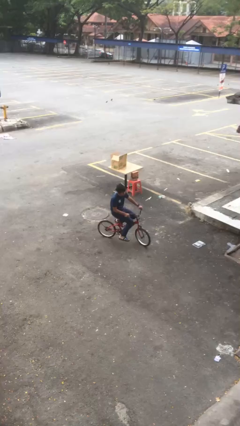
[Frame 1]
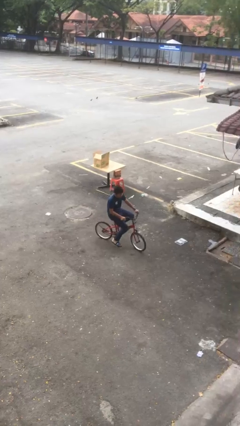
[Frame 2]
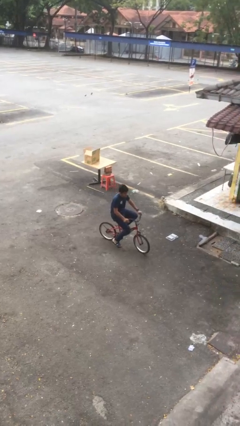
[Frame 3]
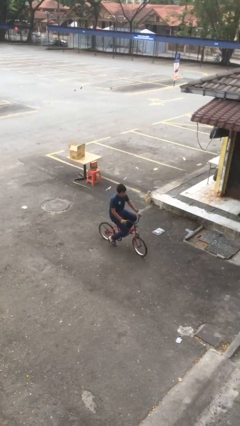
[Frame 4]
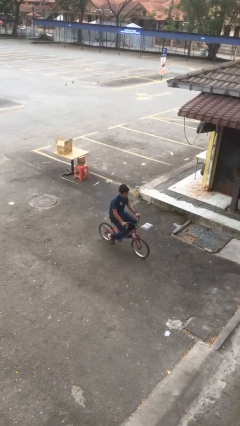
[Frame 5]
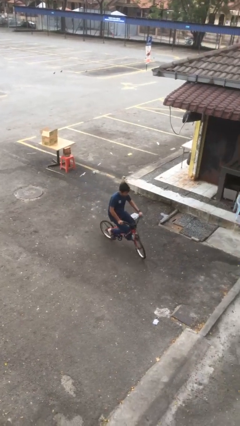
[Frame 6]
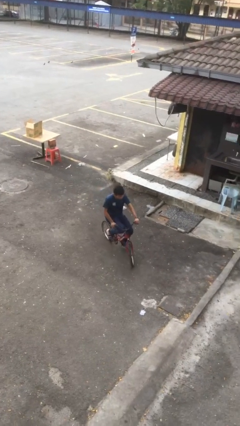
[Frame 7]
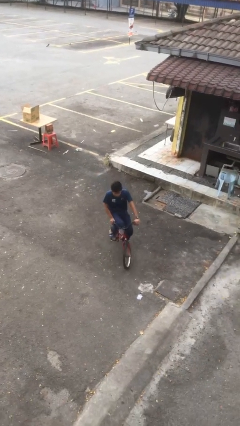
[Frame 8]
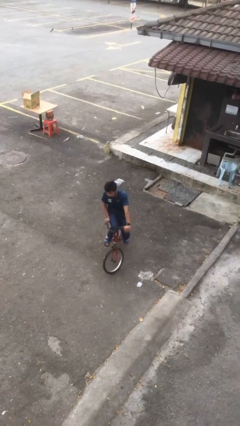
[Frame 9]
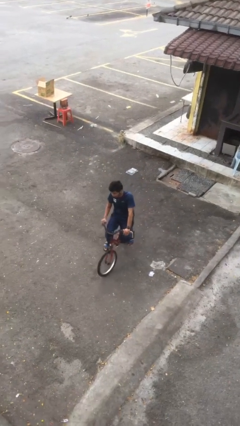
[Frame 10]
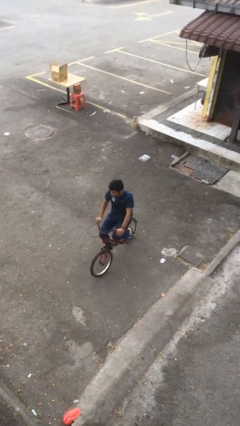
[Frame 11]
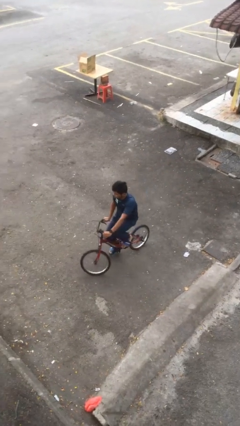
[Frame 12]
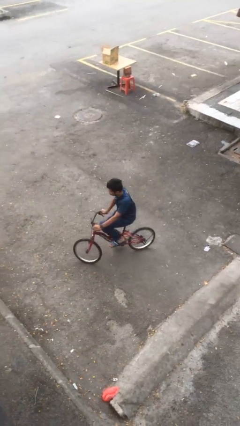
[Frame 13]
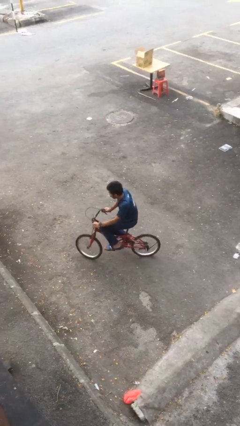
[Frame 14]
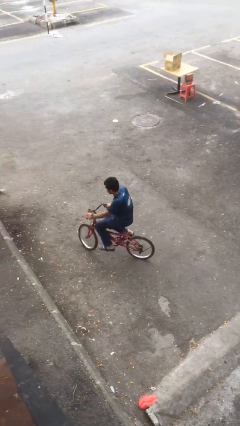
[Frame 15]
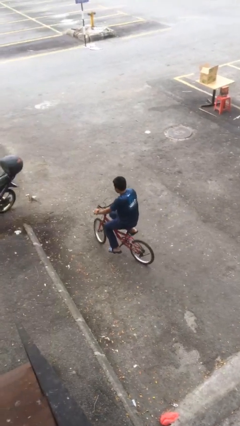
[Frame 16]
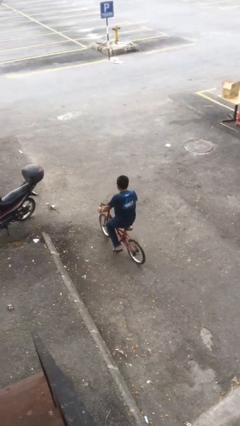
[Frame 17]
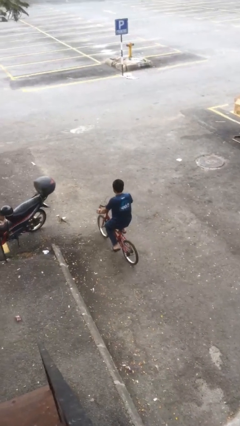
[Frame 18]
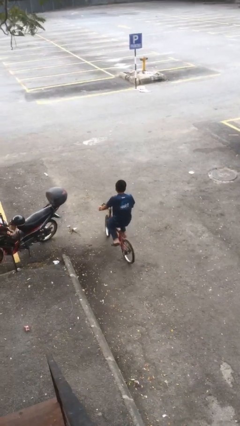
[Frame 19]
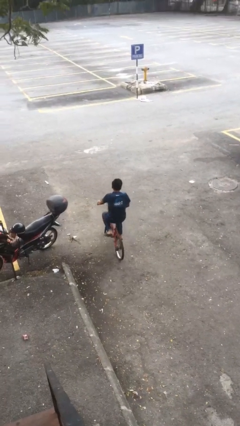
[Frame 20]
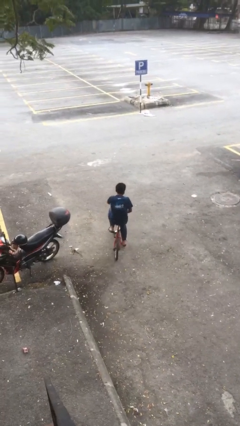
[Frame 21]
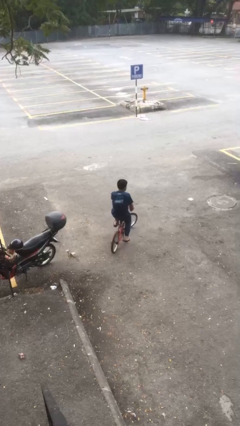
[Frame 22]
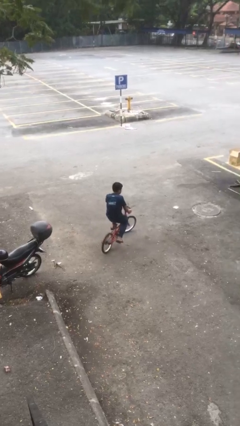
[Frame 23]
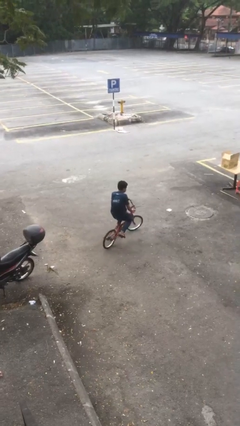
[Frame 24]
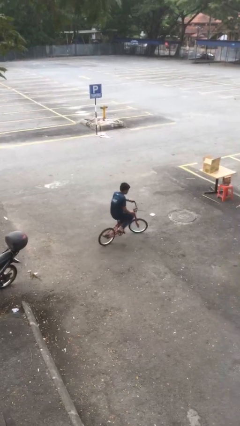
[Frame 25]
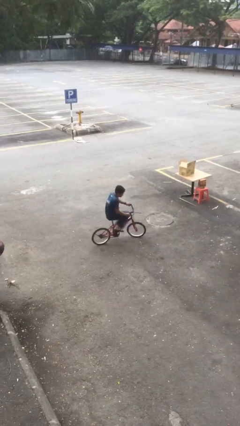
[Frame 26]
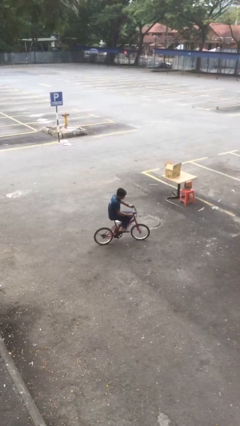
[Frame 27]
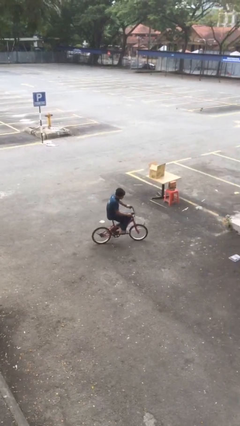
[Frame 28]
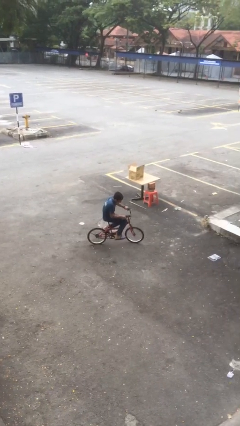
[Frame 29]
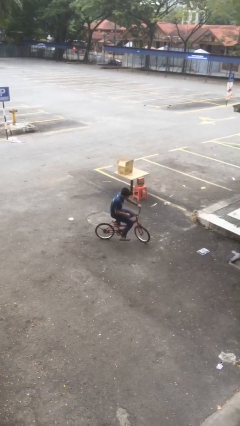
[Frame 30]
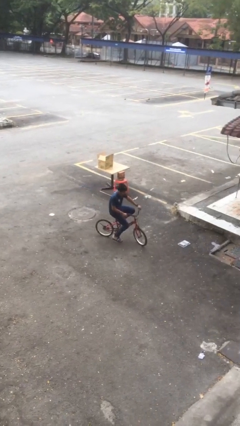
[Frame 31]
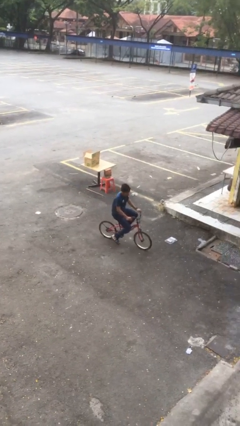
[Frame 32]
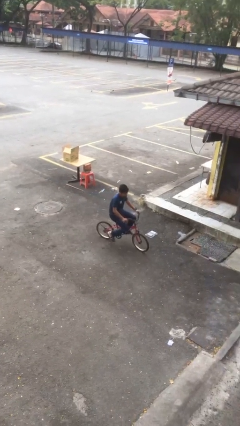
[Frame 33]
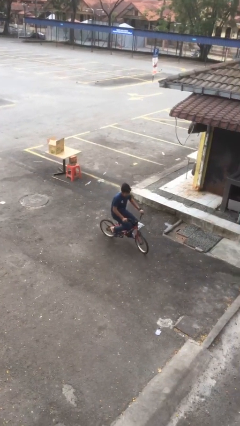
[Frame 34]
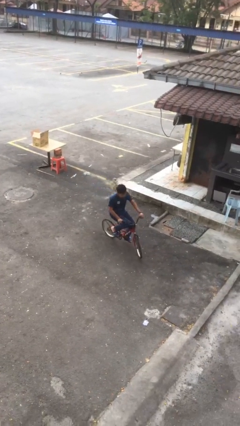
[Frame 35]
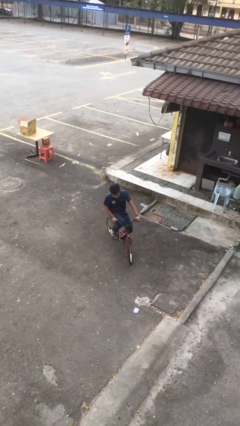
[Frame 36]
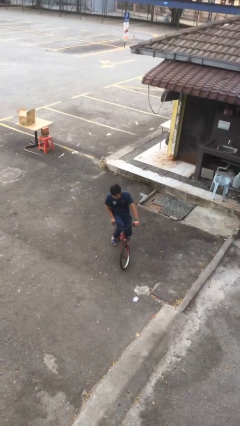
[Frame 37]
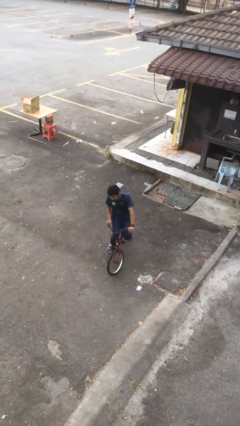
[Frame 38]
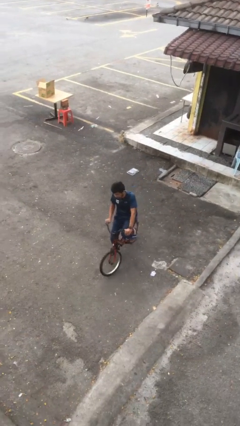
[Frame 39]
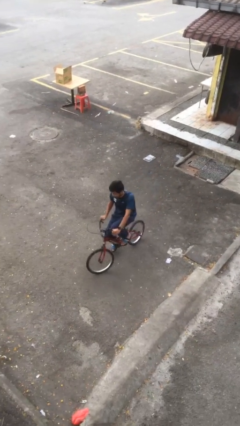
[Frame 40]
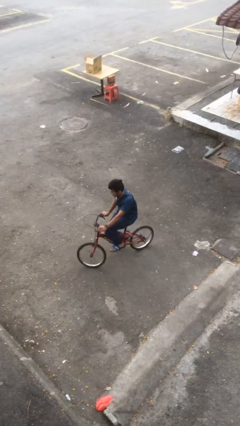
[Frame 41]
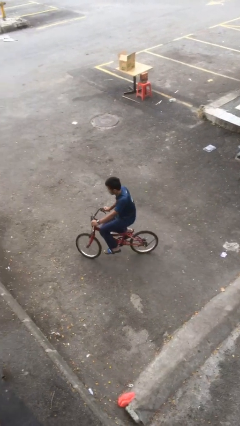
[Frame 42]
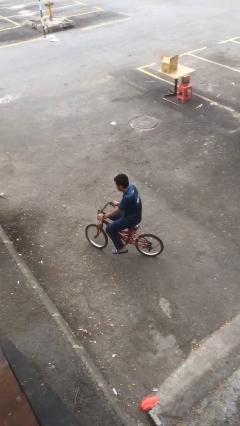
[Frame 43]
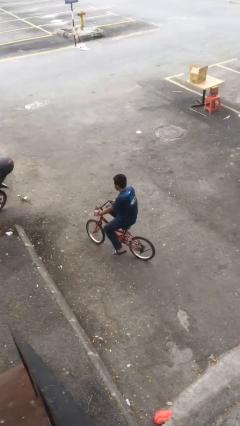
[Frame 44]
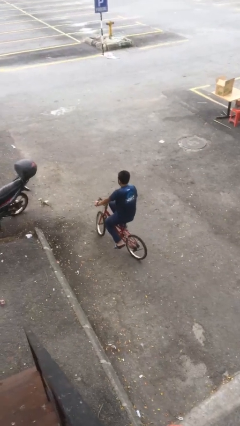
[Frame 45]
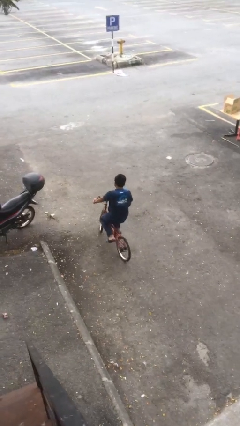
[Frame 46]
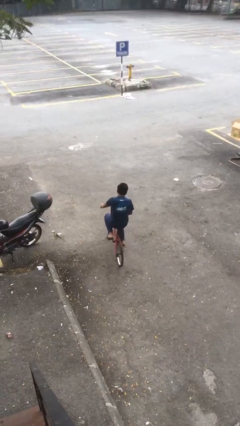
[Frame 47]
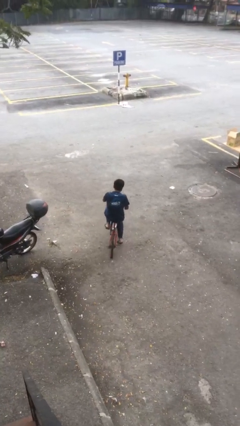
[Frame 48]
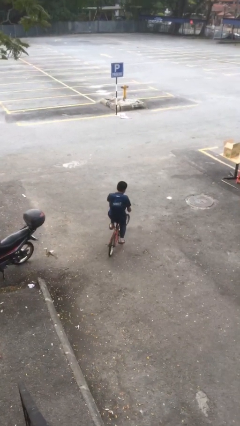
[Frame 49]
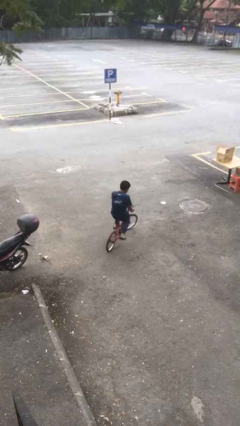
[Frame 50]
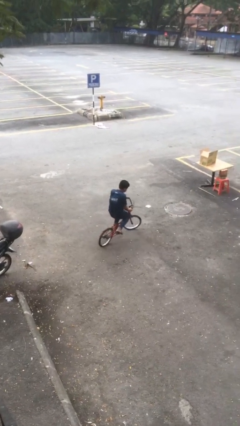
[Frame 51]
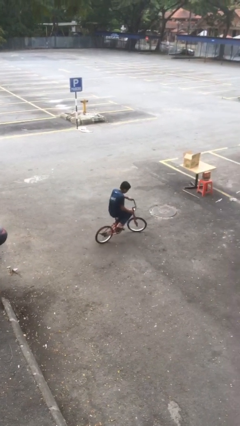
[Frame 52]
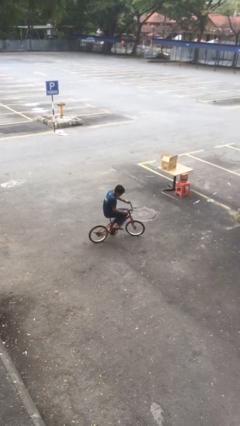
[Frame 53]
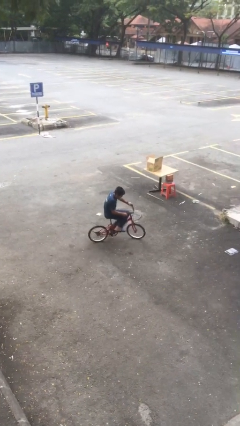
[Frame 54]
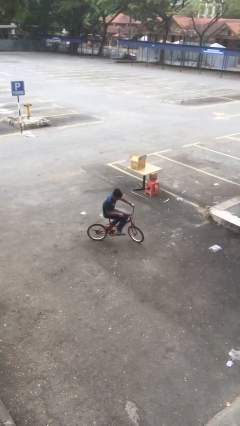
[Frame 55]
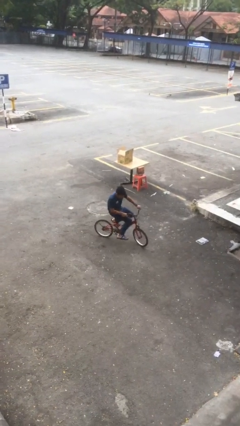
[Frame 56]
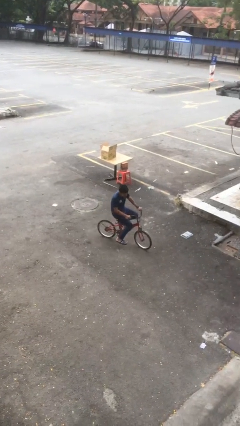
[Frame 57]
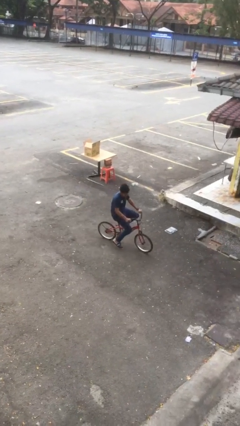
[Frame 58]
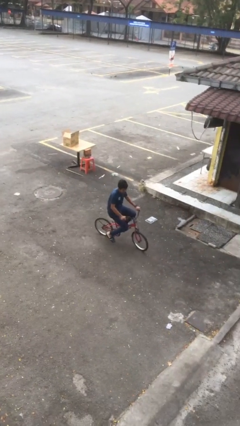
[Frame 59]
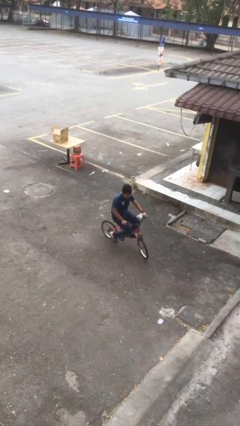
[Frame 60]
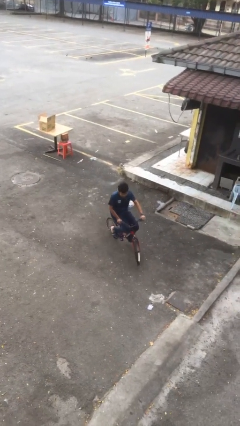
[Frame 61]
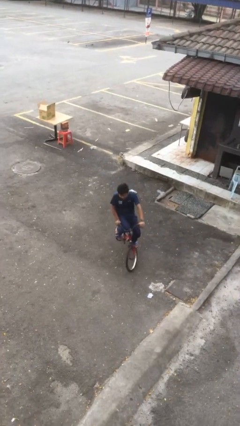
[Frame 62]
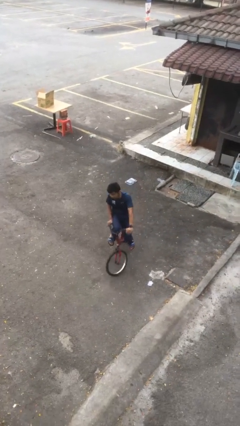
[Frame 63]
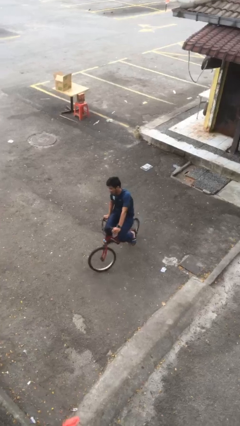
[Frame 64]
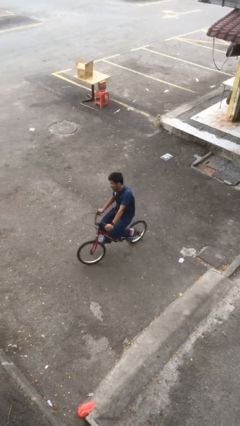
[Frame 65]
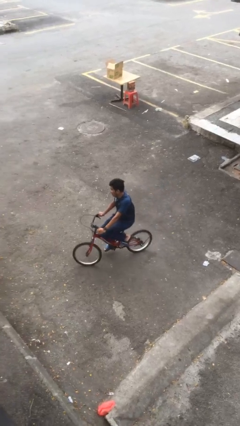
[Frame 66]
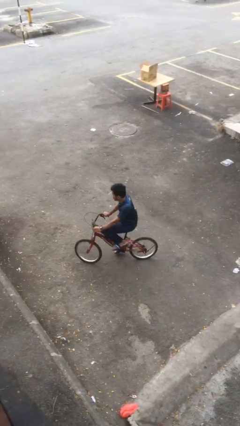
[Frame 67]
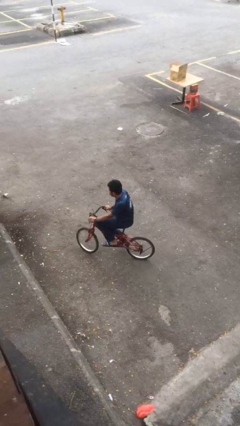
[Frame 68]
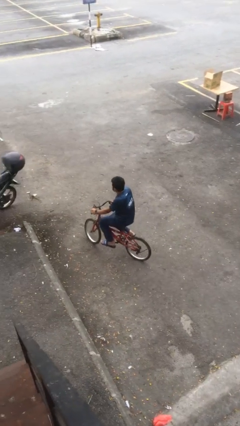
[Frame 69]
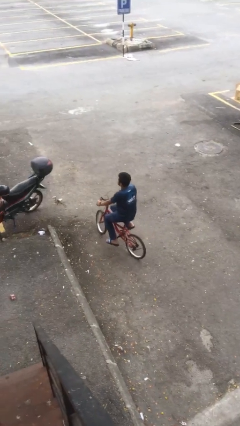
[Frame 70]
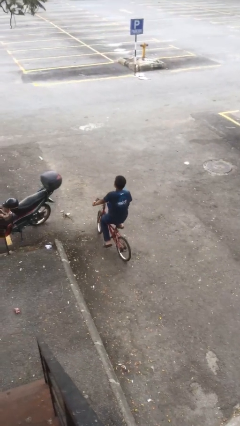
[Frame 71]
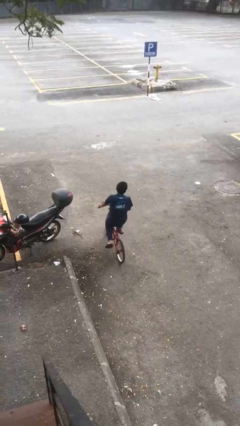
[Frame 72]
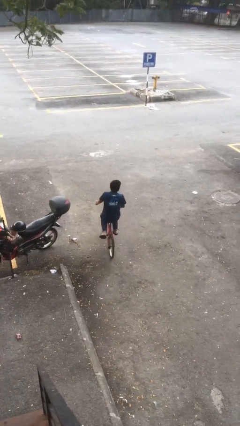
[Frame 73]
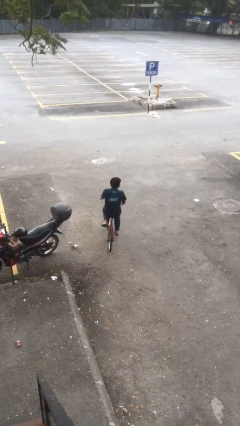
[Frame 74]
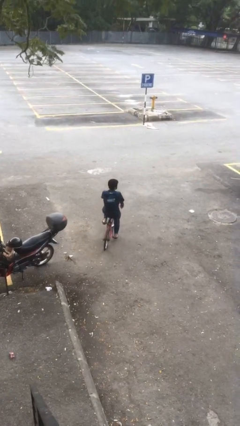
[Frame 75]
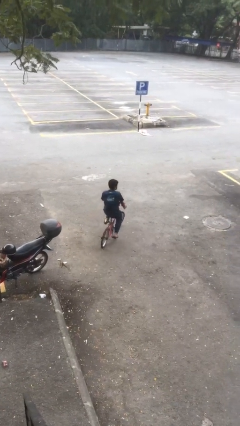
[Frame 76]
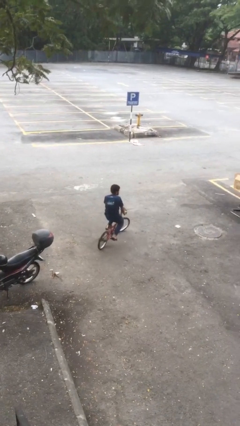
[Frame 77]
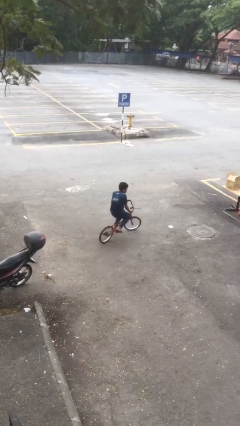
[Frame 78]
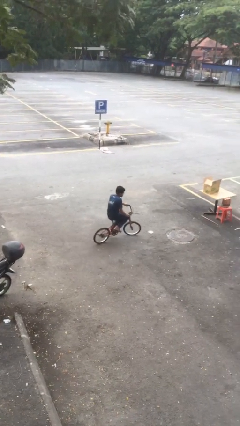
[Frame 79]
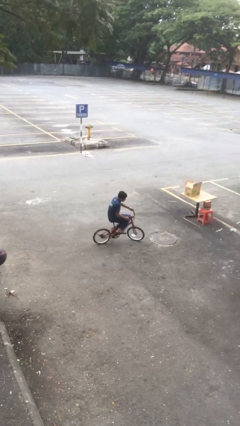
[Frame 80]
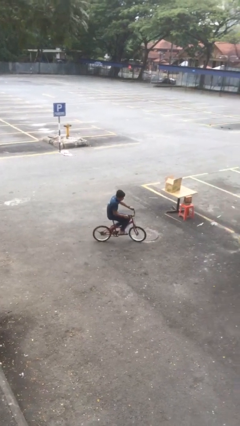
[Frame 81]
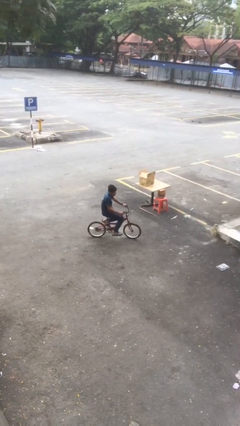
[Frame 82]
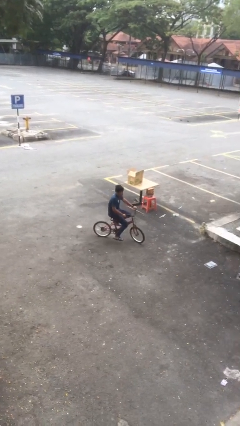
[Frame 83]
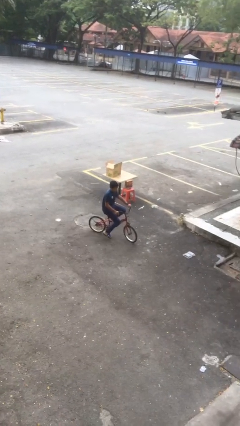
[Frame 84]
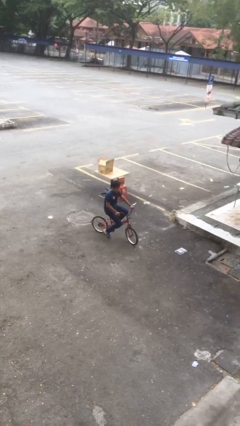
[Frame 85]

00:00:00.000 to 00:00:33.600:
person rides bicycle

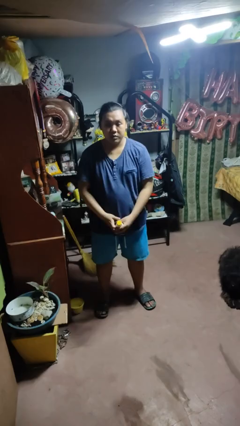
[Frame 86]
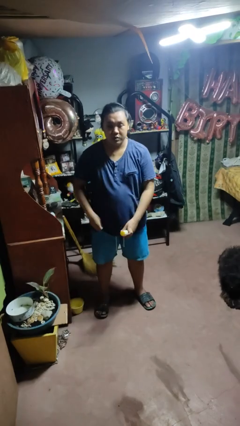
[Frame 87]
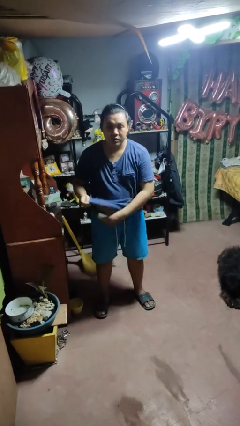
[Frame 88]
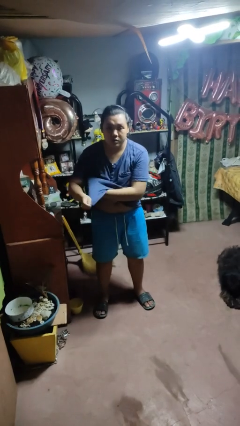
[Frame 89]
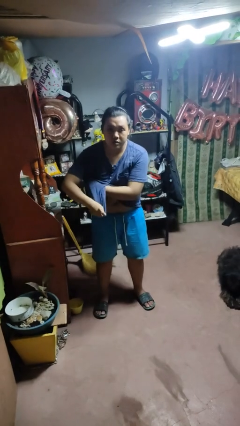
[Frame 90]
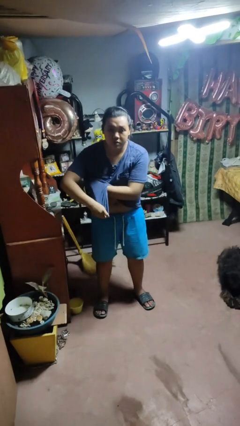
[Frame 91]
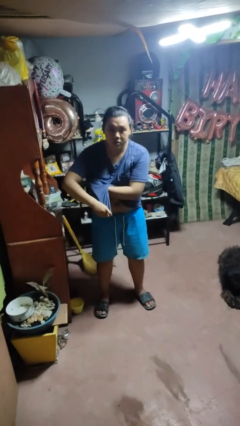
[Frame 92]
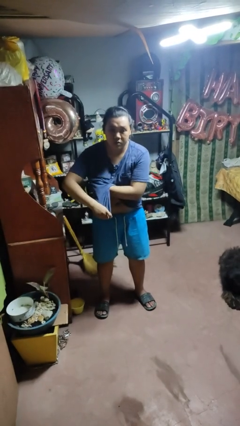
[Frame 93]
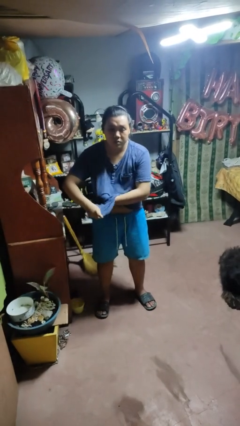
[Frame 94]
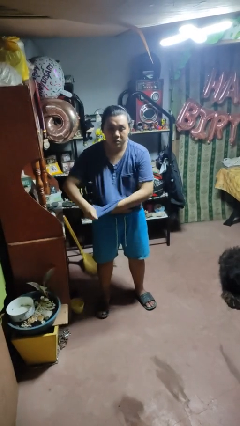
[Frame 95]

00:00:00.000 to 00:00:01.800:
person applies deodorant
